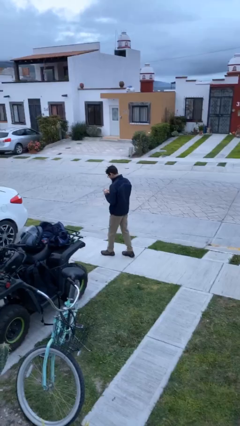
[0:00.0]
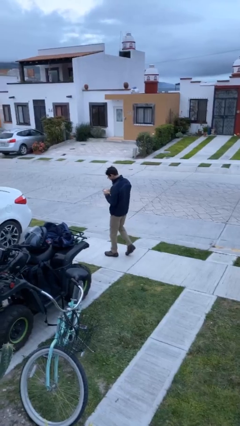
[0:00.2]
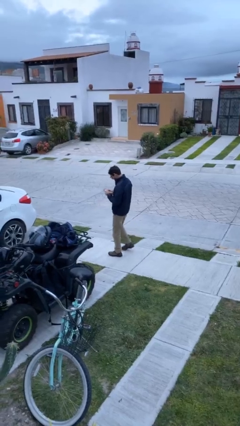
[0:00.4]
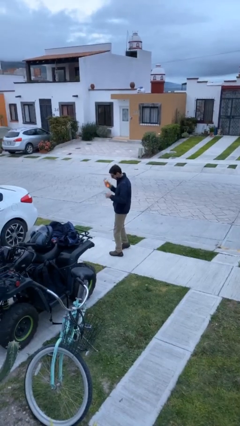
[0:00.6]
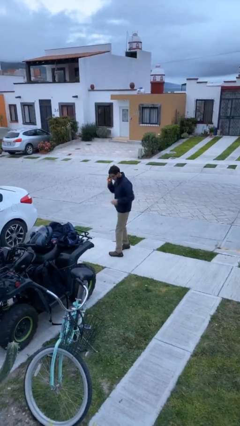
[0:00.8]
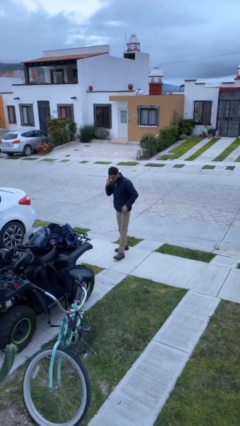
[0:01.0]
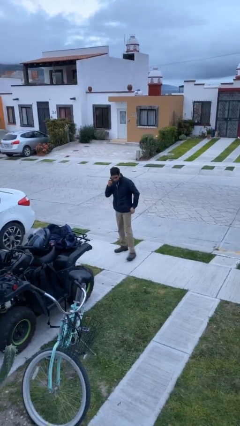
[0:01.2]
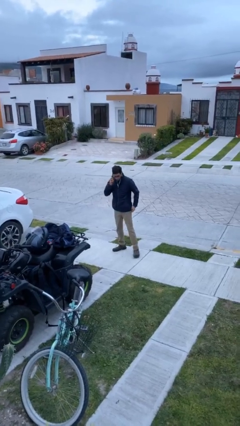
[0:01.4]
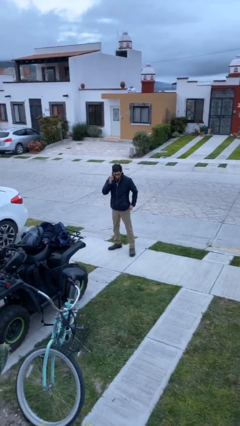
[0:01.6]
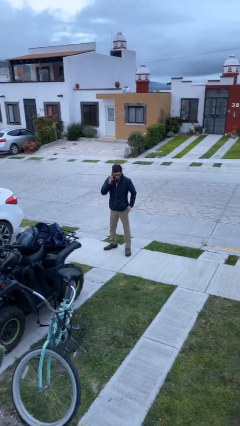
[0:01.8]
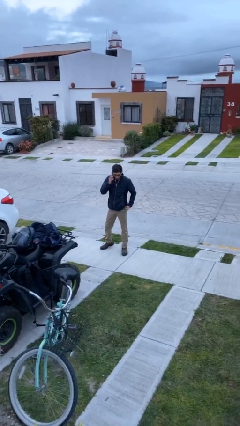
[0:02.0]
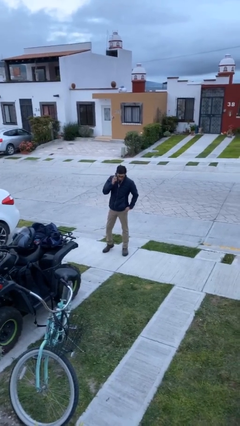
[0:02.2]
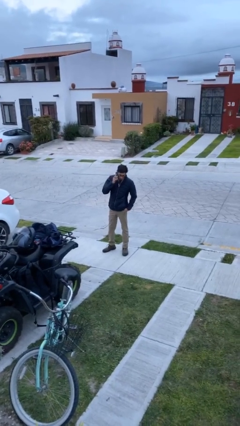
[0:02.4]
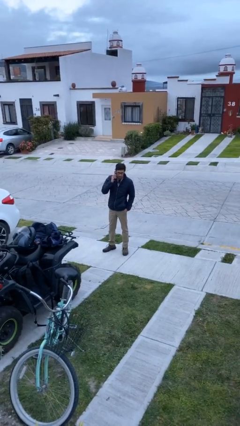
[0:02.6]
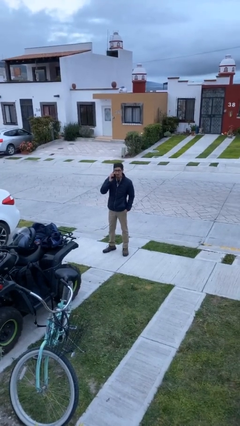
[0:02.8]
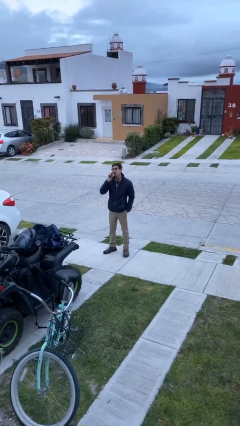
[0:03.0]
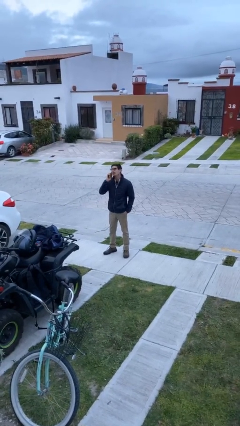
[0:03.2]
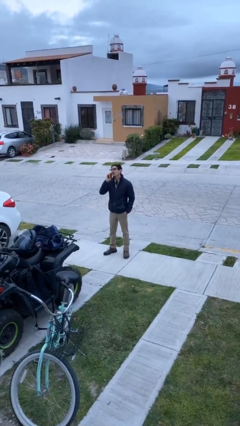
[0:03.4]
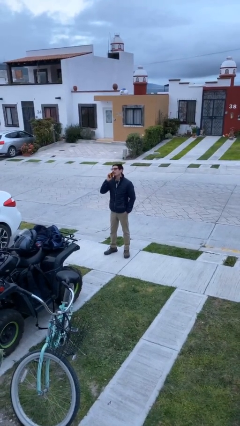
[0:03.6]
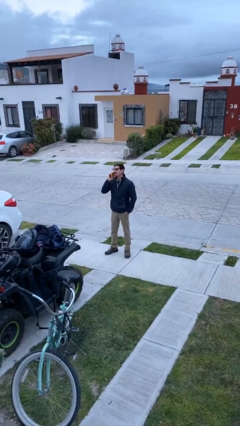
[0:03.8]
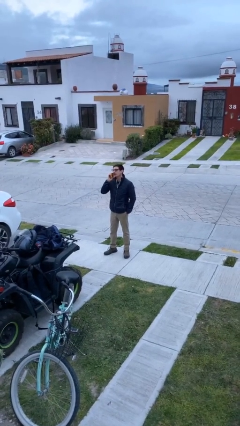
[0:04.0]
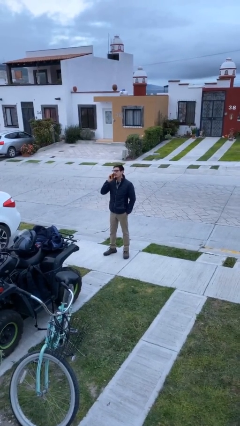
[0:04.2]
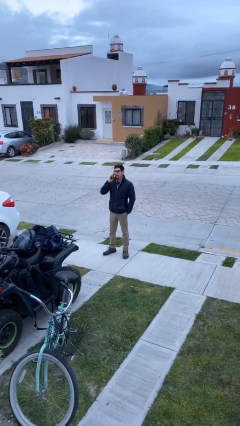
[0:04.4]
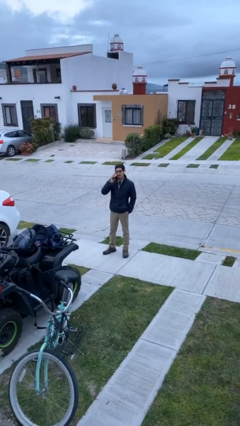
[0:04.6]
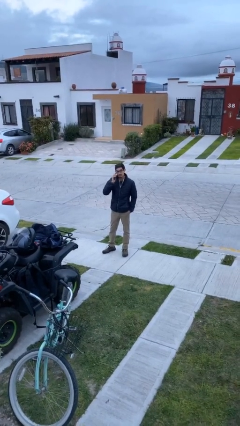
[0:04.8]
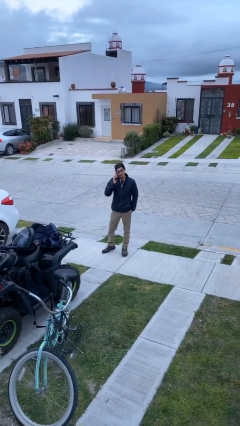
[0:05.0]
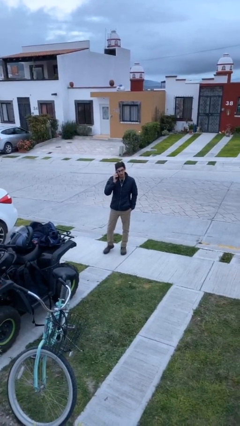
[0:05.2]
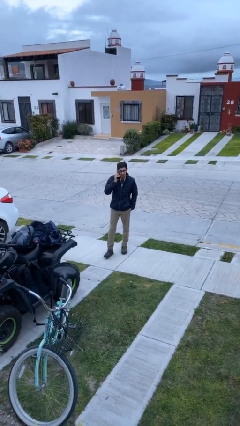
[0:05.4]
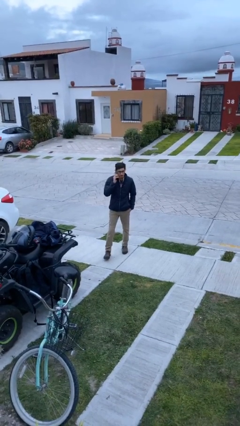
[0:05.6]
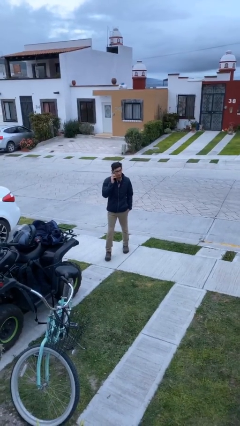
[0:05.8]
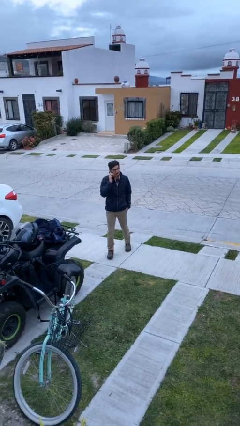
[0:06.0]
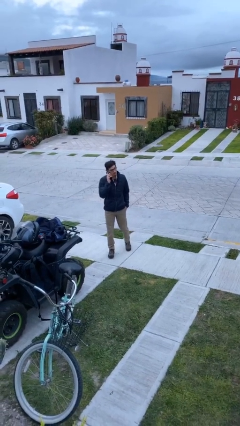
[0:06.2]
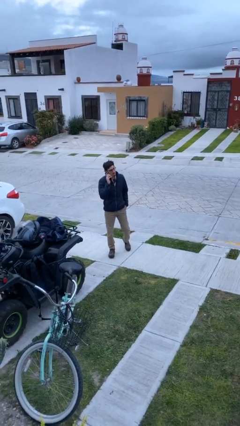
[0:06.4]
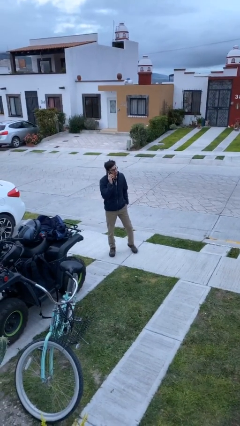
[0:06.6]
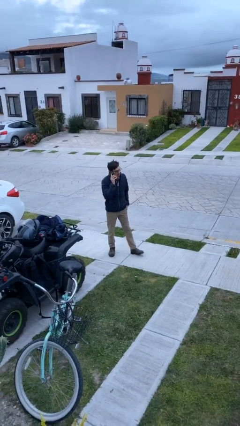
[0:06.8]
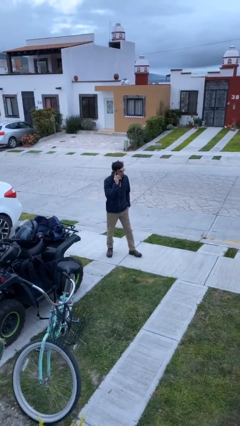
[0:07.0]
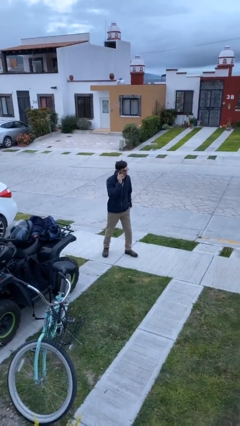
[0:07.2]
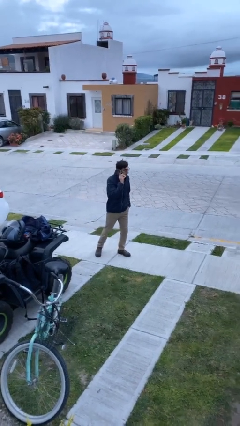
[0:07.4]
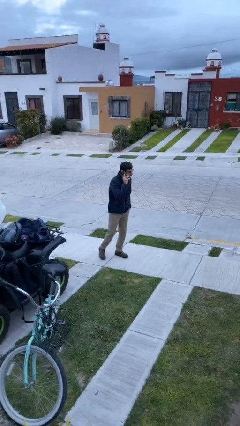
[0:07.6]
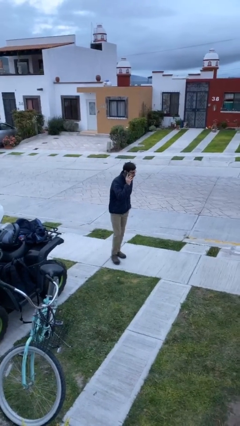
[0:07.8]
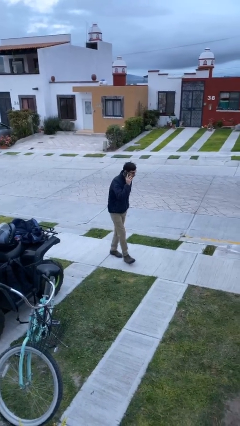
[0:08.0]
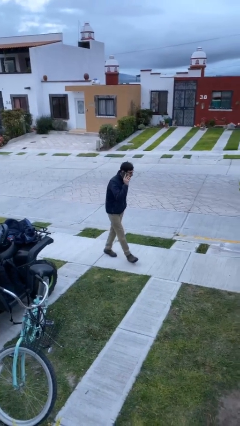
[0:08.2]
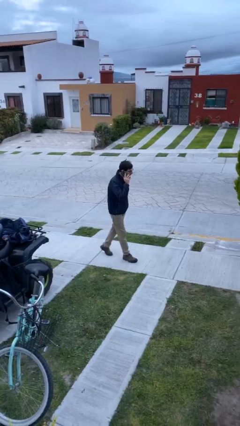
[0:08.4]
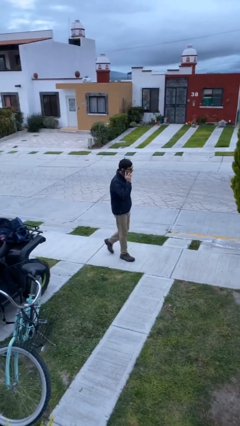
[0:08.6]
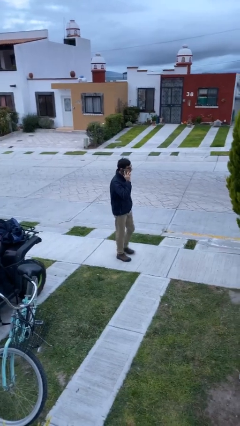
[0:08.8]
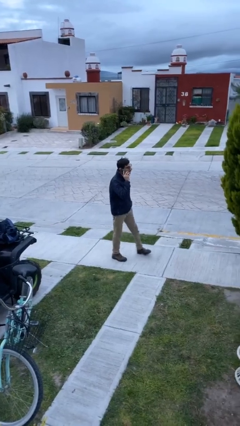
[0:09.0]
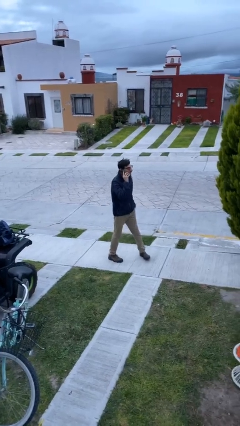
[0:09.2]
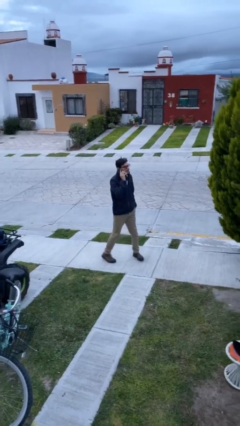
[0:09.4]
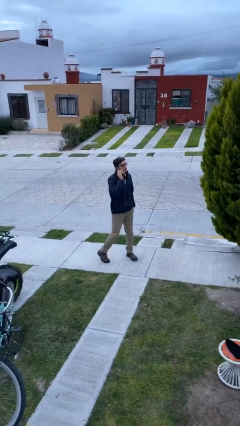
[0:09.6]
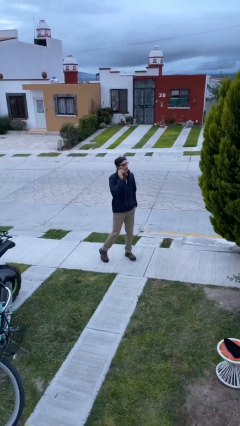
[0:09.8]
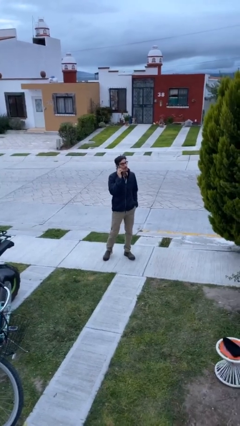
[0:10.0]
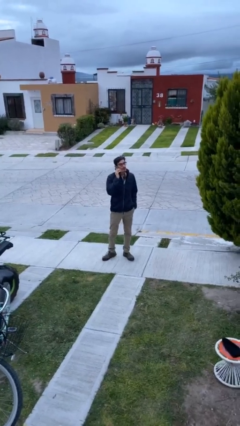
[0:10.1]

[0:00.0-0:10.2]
person talks on phone

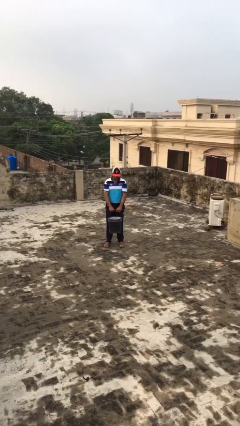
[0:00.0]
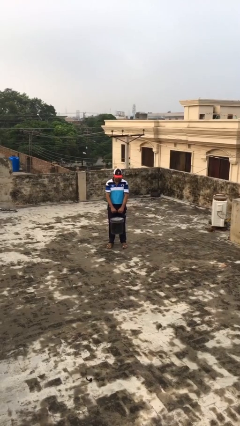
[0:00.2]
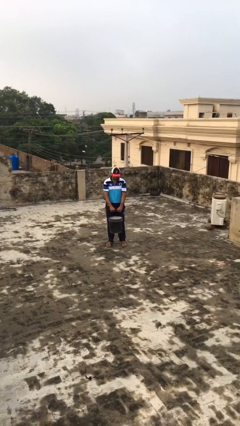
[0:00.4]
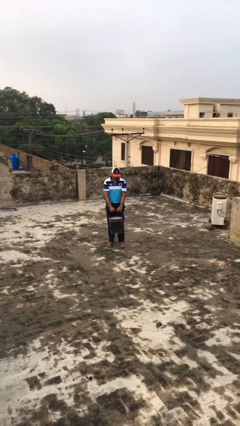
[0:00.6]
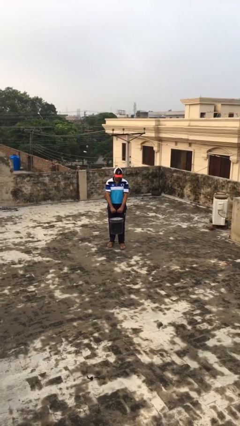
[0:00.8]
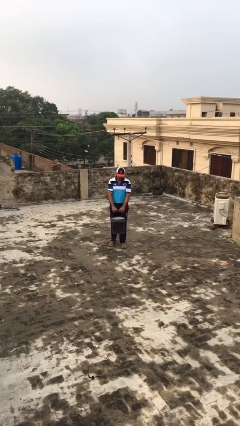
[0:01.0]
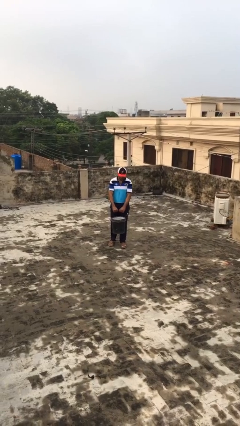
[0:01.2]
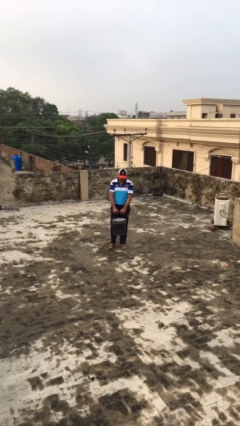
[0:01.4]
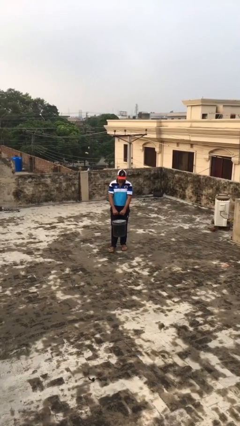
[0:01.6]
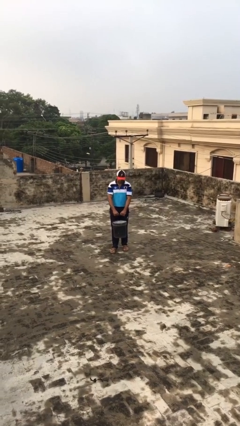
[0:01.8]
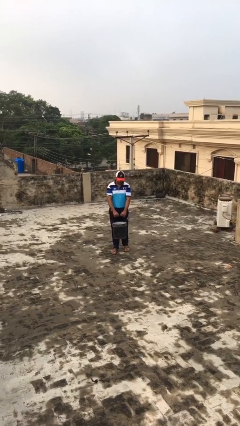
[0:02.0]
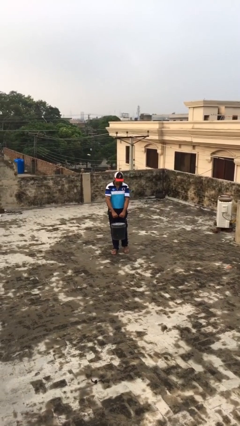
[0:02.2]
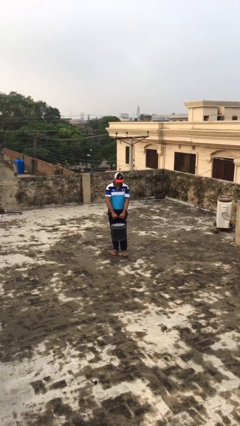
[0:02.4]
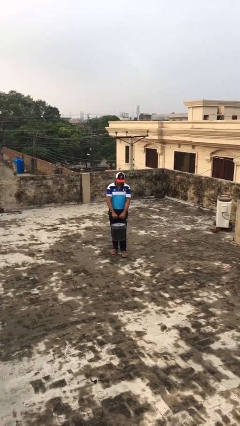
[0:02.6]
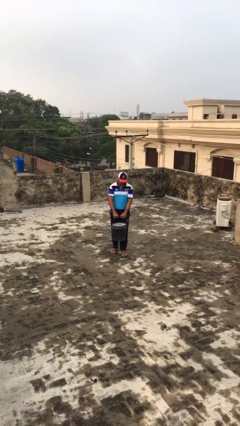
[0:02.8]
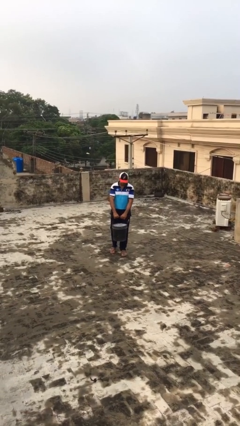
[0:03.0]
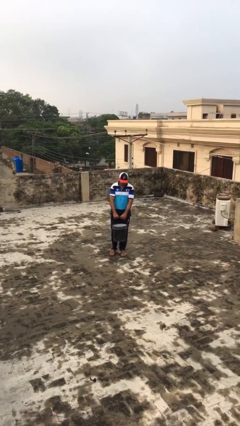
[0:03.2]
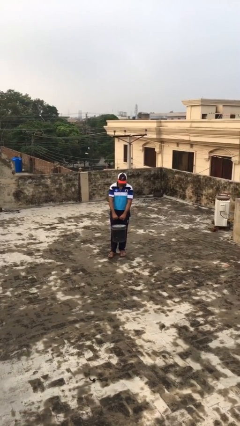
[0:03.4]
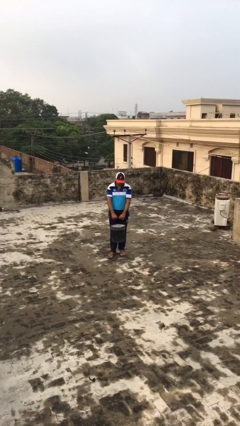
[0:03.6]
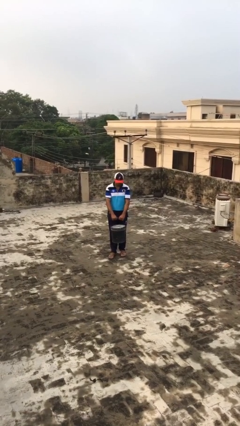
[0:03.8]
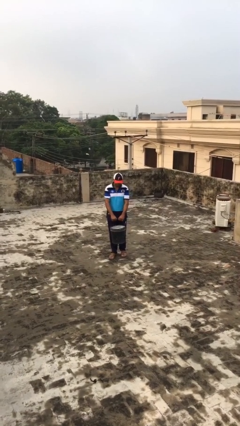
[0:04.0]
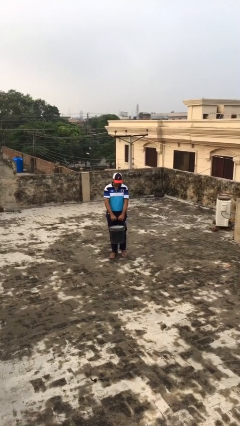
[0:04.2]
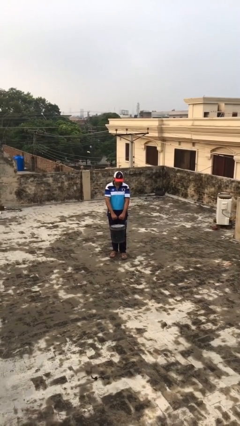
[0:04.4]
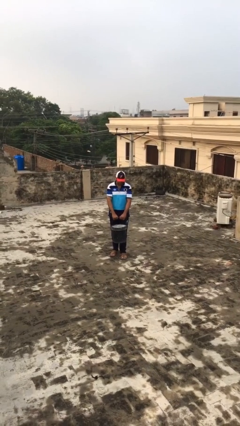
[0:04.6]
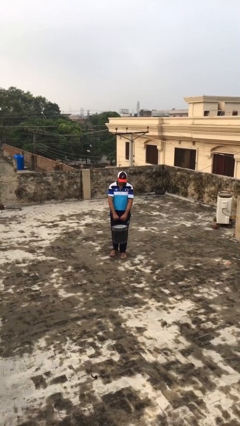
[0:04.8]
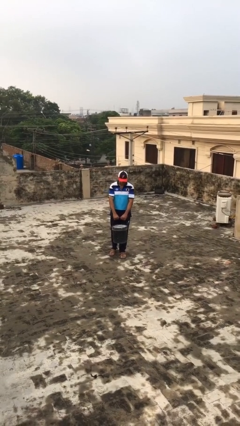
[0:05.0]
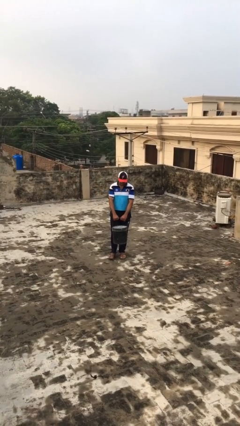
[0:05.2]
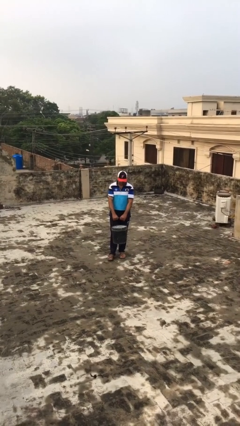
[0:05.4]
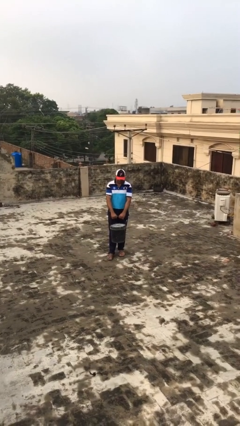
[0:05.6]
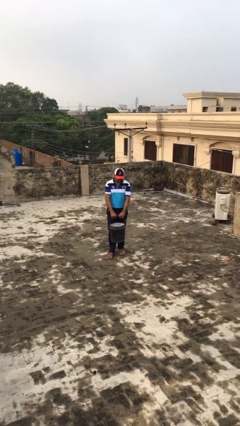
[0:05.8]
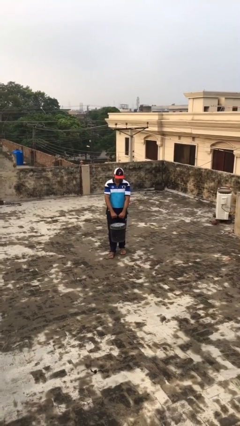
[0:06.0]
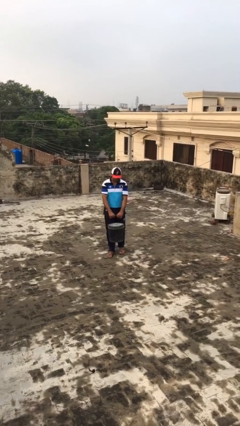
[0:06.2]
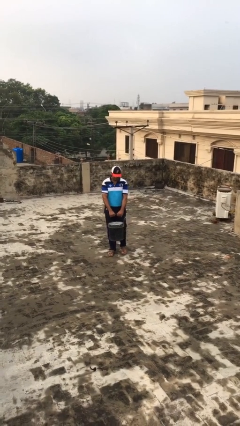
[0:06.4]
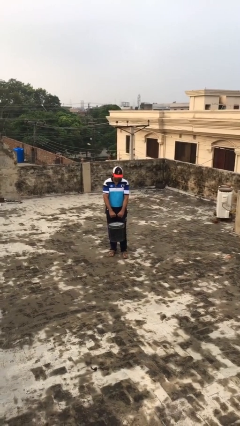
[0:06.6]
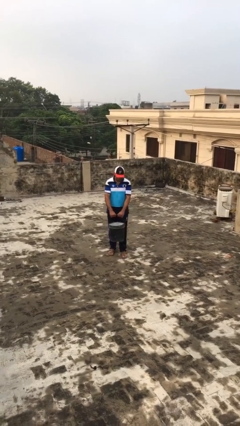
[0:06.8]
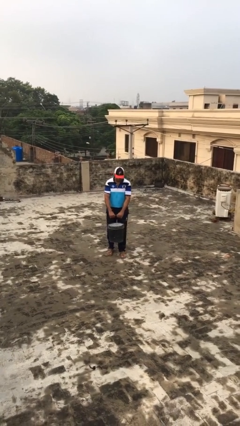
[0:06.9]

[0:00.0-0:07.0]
person carries heavy object

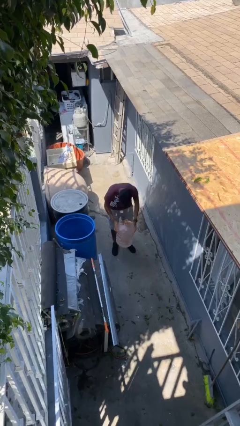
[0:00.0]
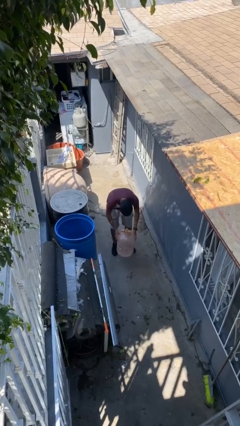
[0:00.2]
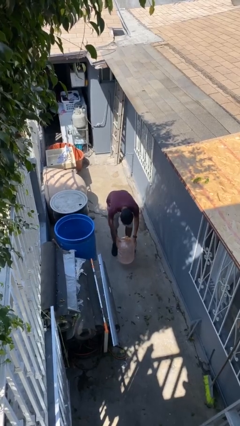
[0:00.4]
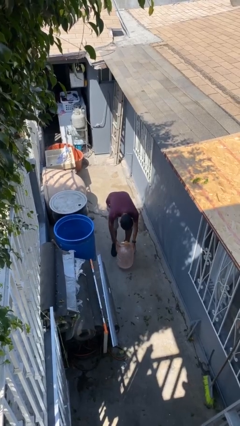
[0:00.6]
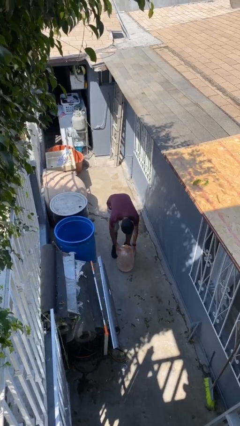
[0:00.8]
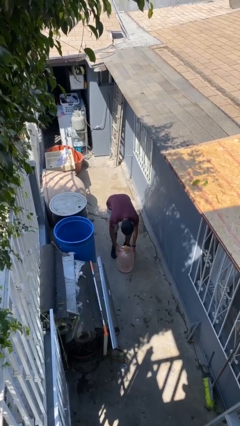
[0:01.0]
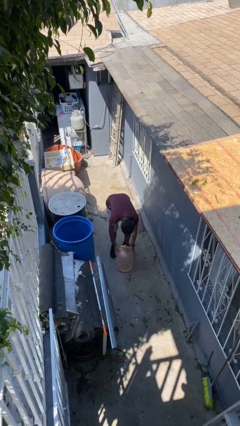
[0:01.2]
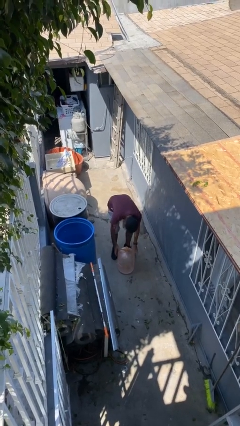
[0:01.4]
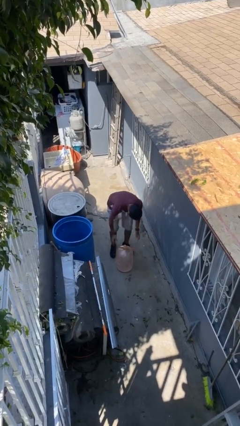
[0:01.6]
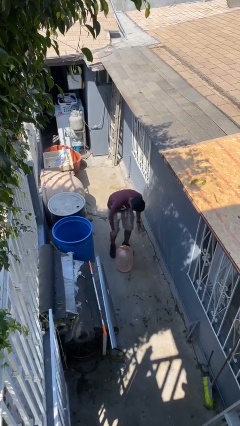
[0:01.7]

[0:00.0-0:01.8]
person puts down object on floor
